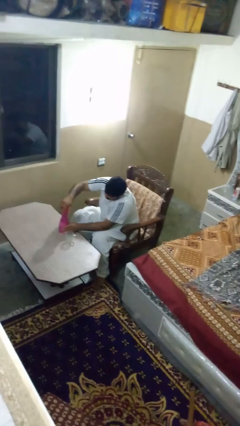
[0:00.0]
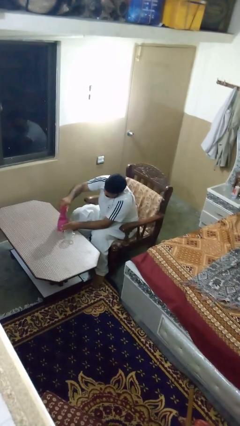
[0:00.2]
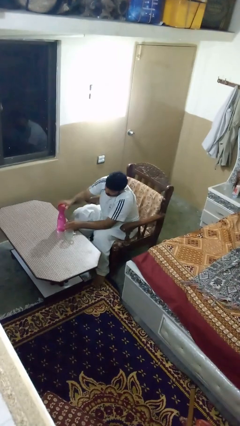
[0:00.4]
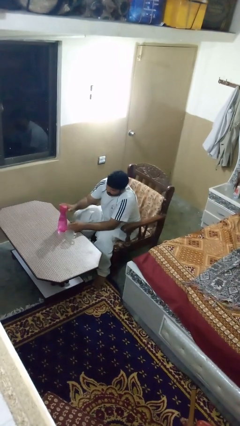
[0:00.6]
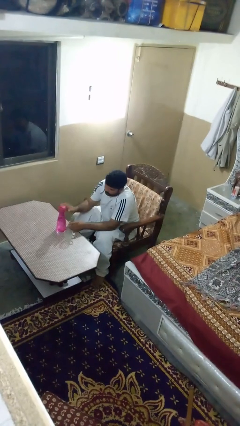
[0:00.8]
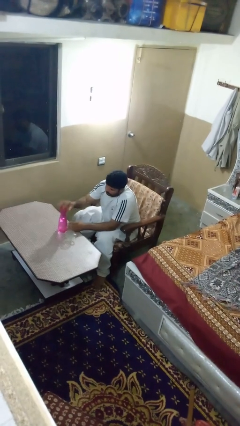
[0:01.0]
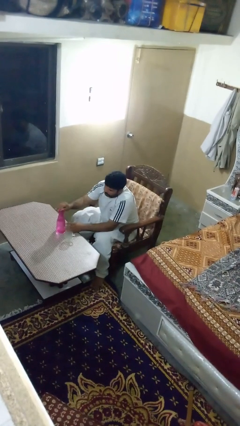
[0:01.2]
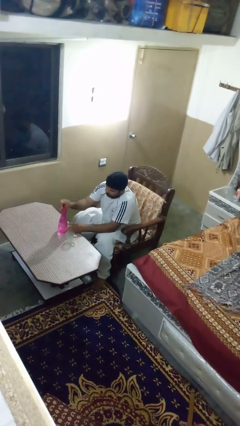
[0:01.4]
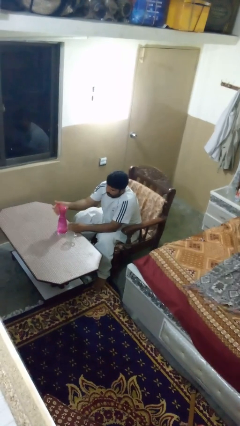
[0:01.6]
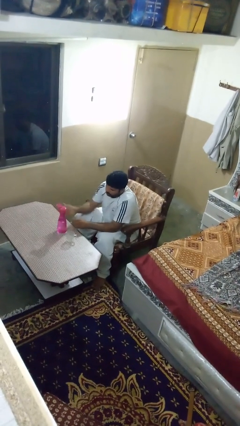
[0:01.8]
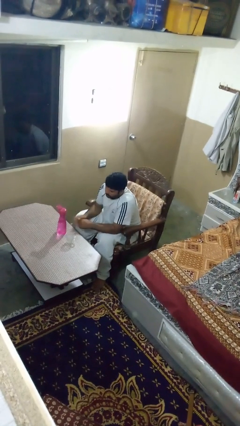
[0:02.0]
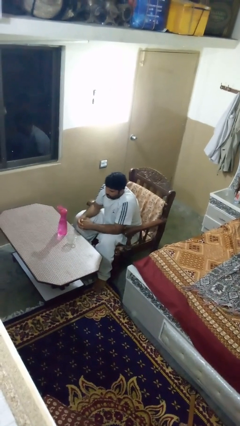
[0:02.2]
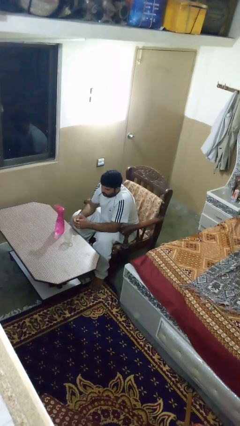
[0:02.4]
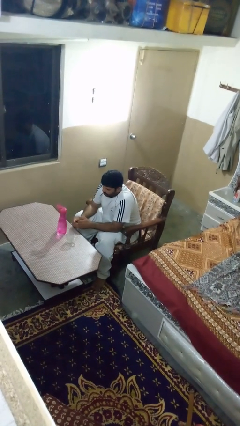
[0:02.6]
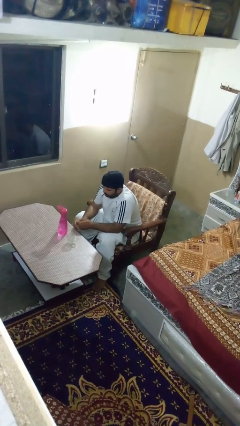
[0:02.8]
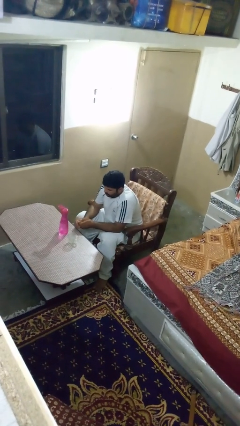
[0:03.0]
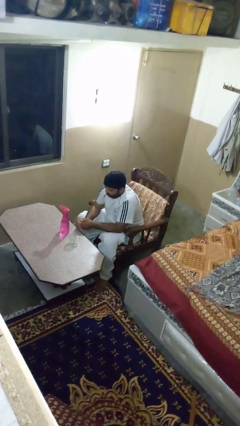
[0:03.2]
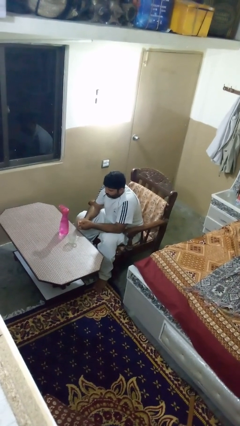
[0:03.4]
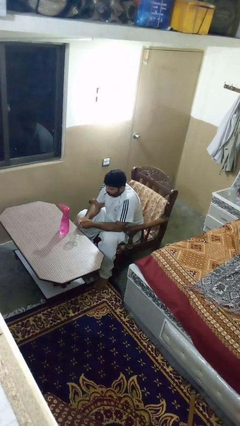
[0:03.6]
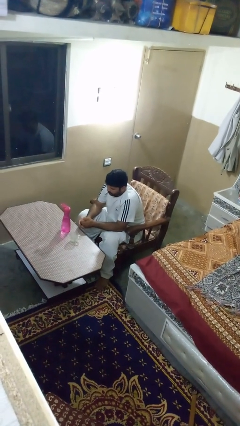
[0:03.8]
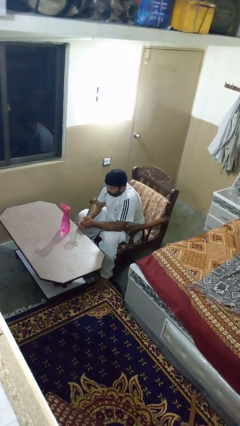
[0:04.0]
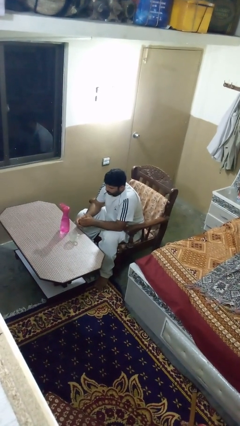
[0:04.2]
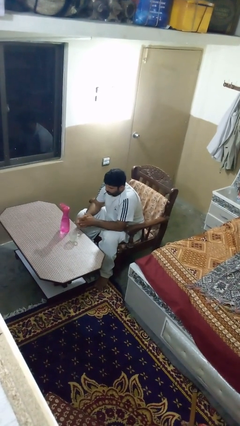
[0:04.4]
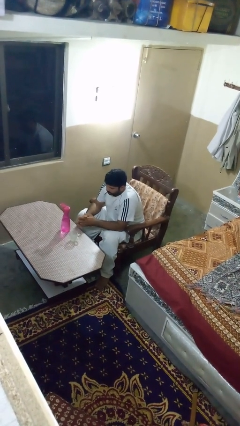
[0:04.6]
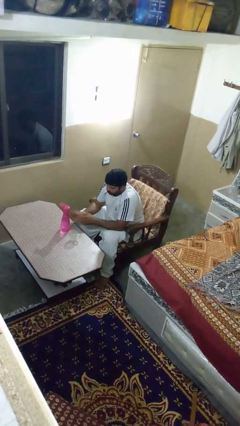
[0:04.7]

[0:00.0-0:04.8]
person pours liquid into cup

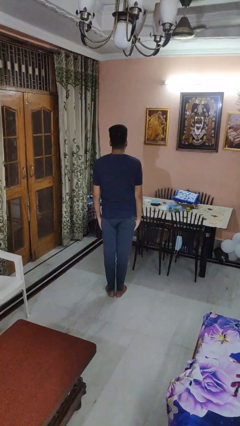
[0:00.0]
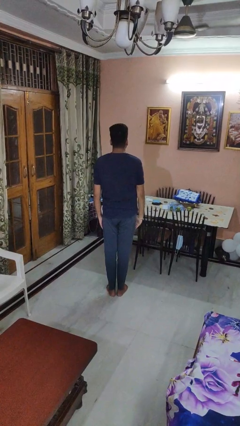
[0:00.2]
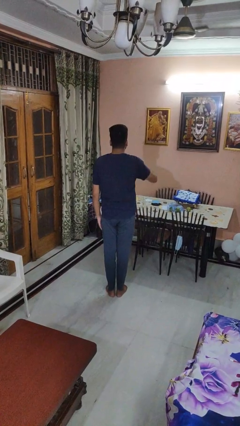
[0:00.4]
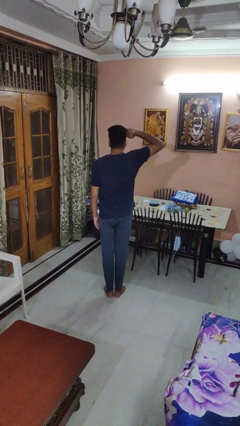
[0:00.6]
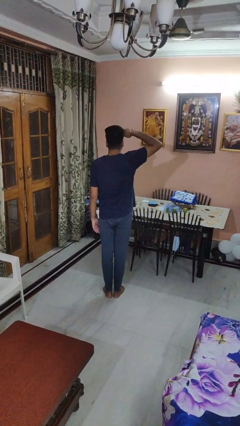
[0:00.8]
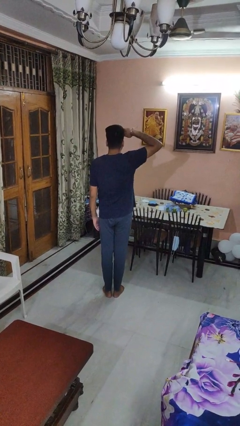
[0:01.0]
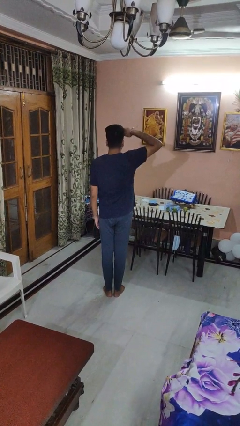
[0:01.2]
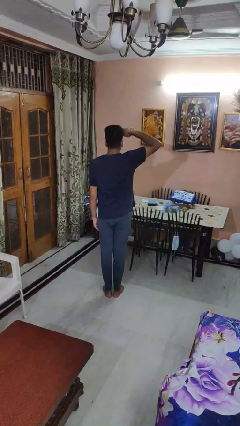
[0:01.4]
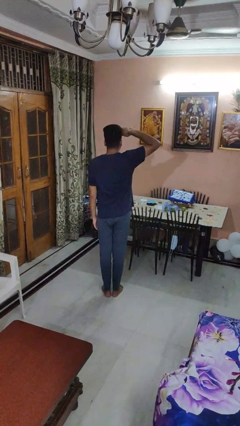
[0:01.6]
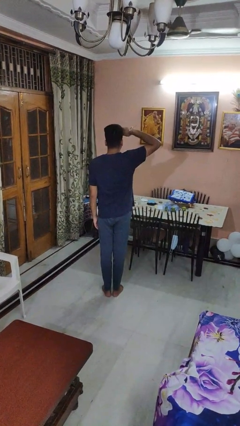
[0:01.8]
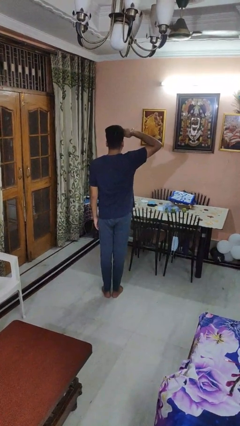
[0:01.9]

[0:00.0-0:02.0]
person salutes

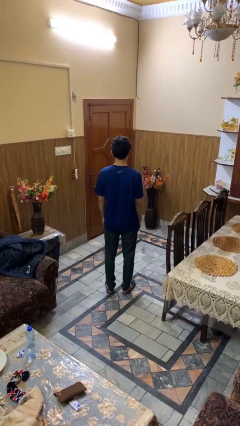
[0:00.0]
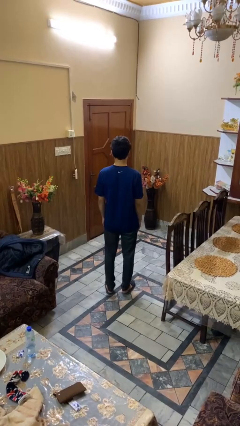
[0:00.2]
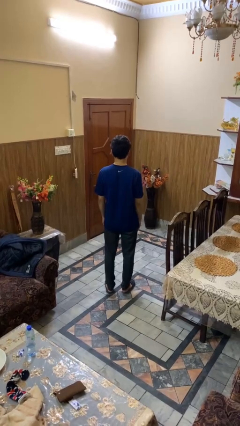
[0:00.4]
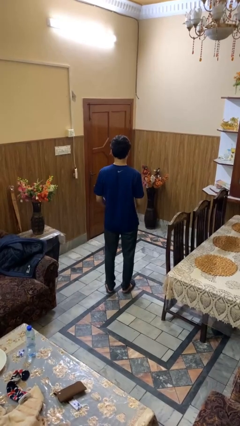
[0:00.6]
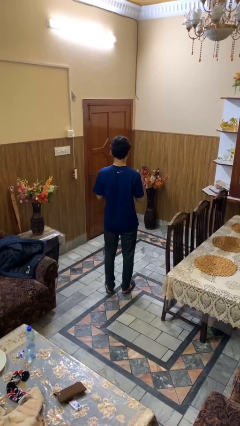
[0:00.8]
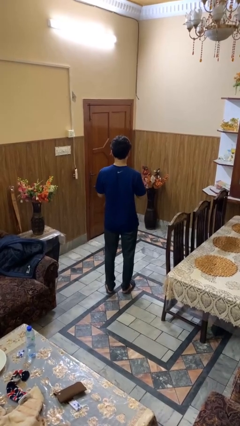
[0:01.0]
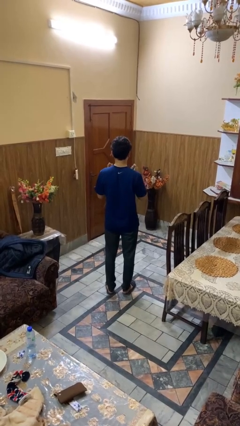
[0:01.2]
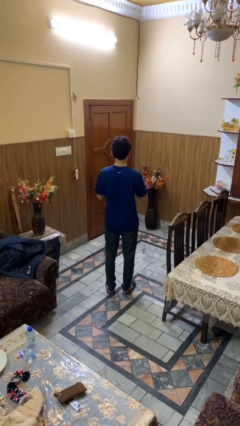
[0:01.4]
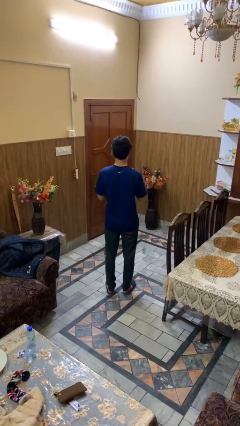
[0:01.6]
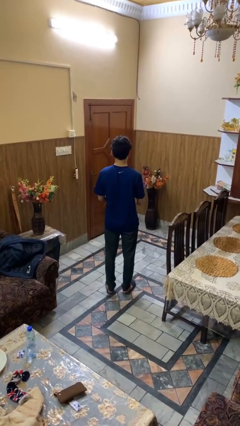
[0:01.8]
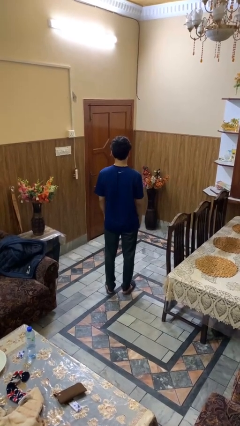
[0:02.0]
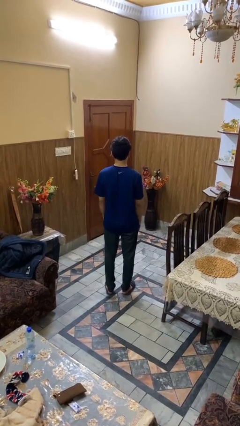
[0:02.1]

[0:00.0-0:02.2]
person drums on chest

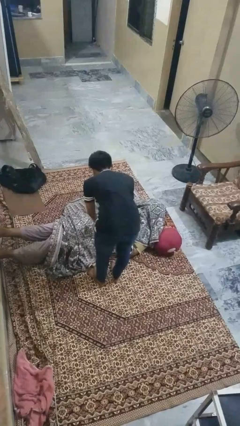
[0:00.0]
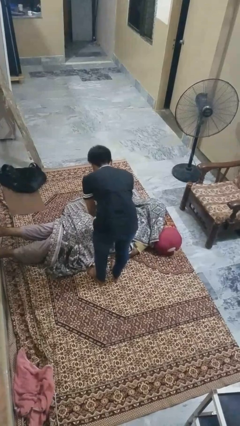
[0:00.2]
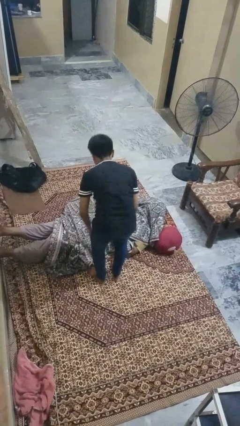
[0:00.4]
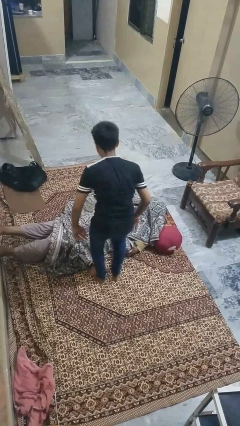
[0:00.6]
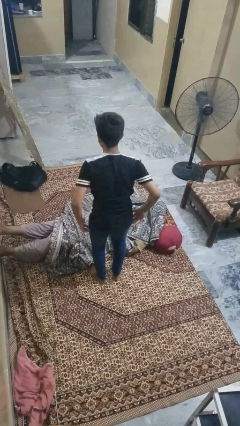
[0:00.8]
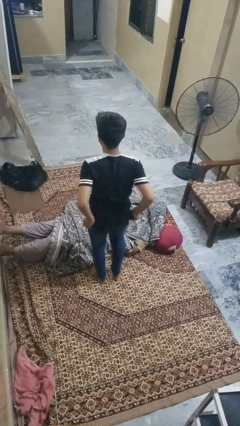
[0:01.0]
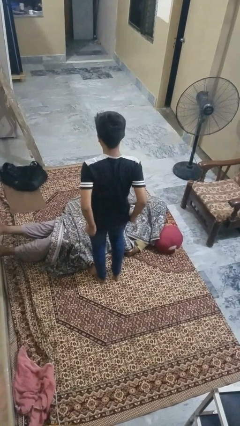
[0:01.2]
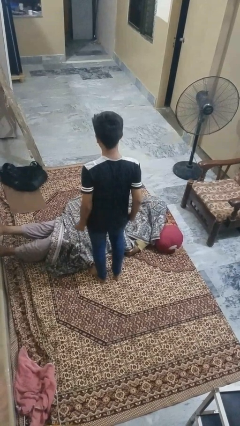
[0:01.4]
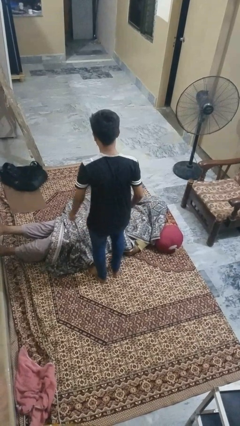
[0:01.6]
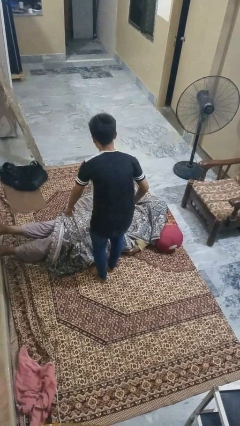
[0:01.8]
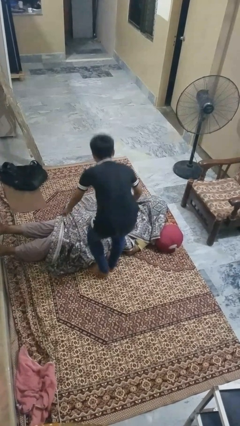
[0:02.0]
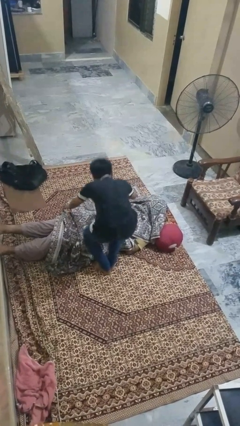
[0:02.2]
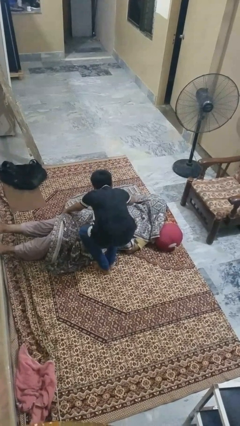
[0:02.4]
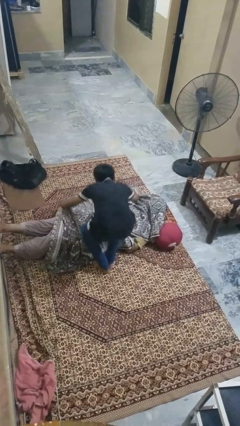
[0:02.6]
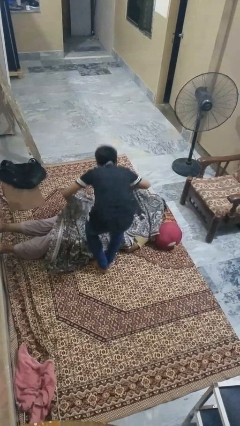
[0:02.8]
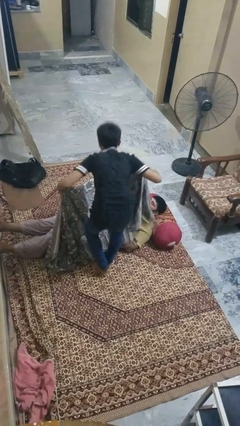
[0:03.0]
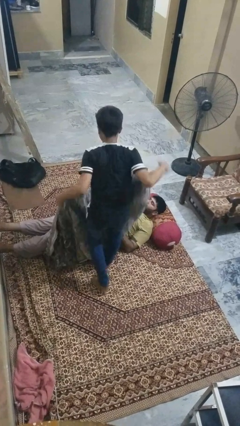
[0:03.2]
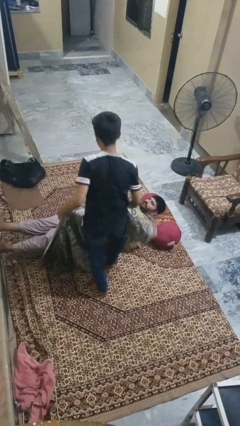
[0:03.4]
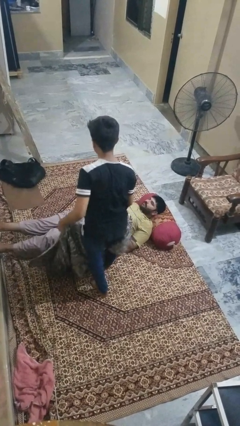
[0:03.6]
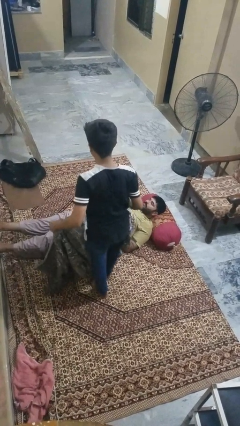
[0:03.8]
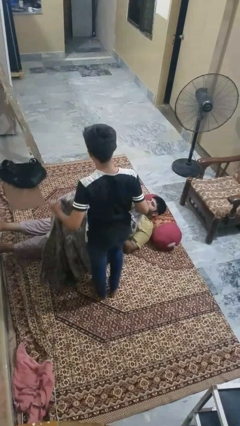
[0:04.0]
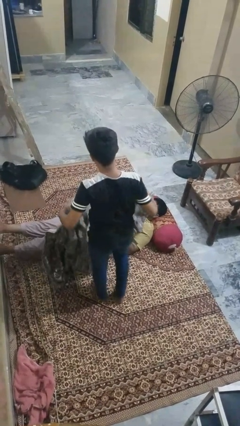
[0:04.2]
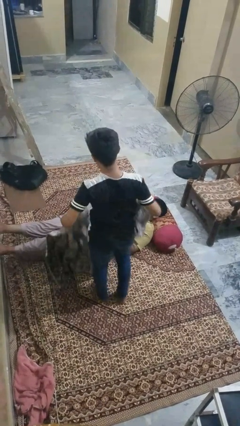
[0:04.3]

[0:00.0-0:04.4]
person uncovers friend with blanket

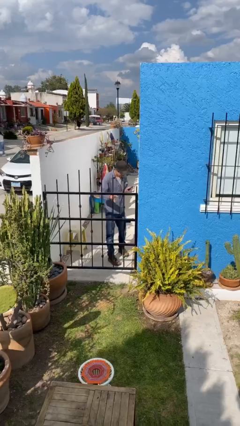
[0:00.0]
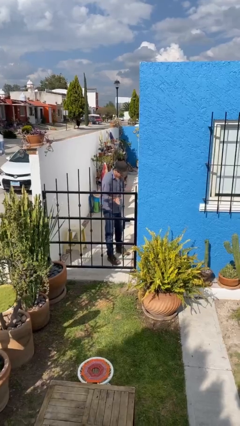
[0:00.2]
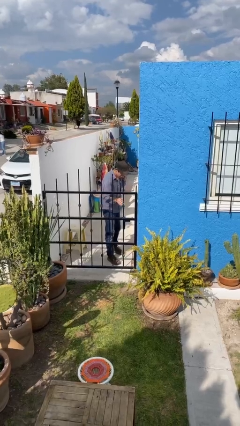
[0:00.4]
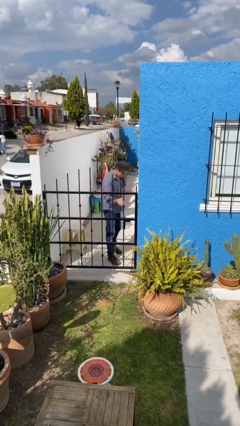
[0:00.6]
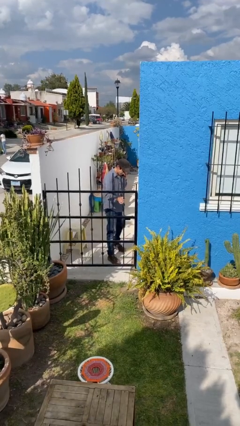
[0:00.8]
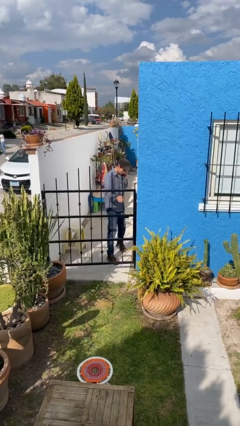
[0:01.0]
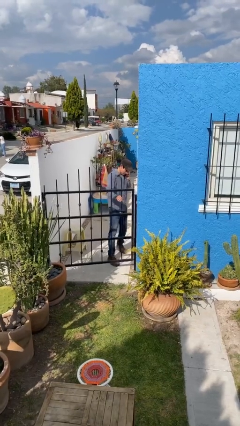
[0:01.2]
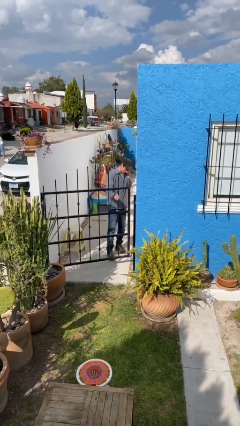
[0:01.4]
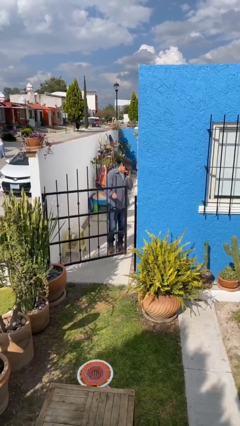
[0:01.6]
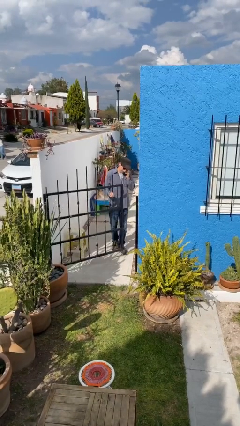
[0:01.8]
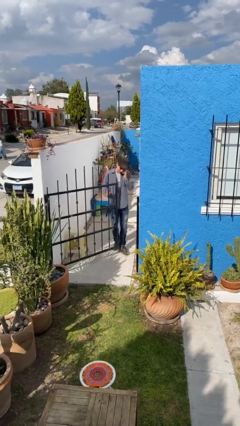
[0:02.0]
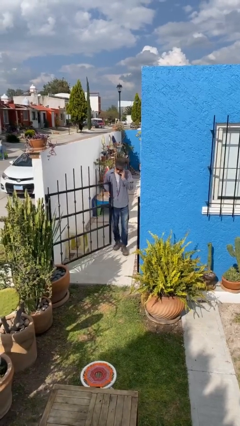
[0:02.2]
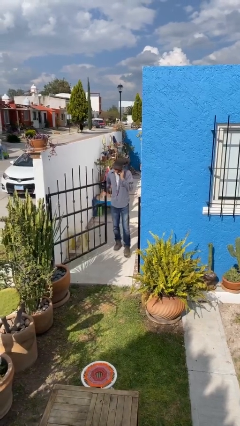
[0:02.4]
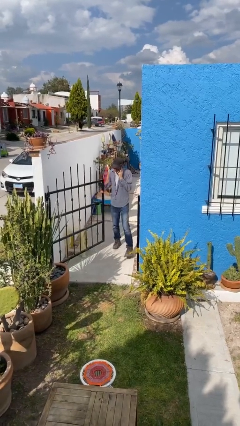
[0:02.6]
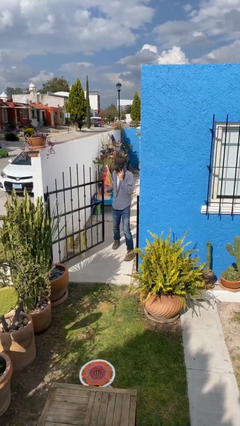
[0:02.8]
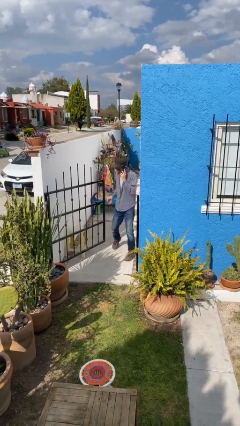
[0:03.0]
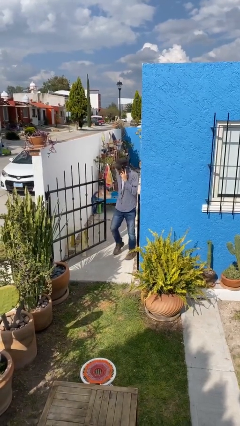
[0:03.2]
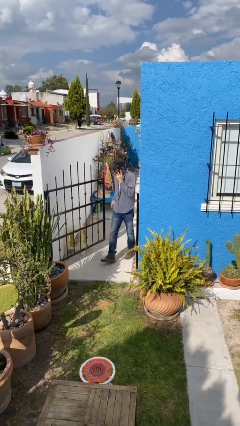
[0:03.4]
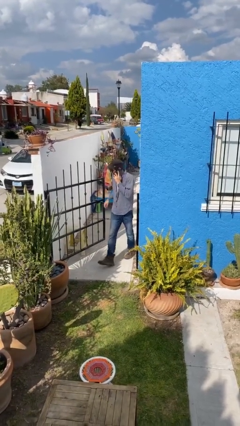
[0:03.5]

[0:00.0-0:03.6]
person opens facility door
